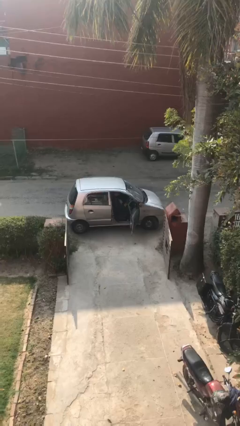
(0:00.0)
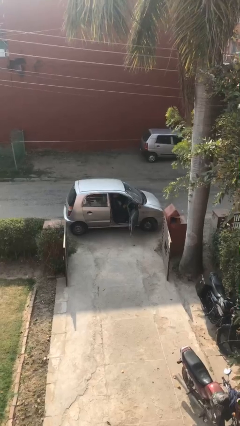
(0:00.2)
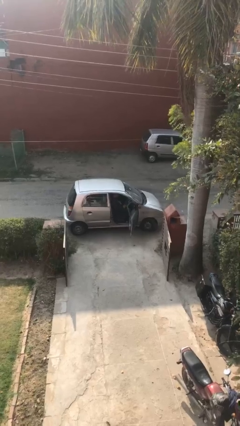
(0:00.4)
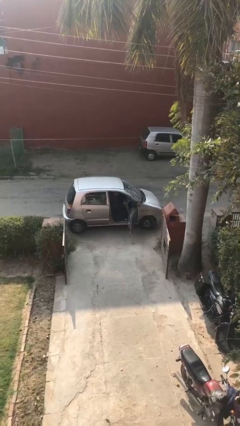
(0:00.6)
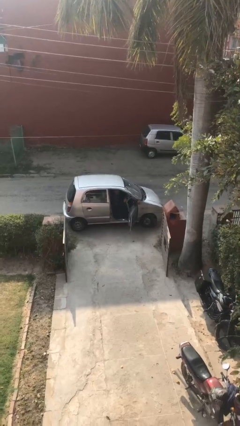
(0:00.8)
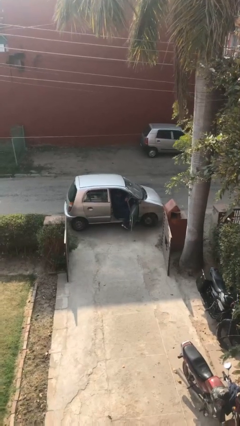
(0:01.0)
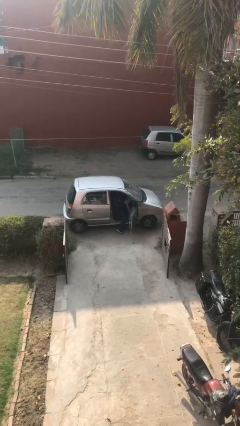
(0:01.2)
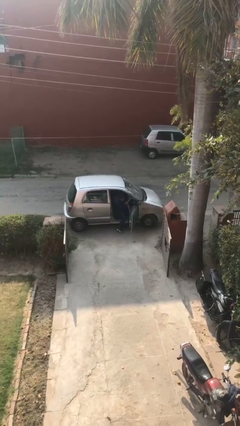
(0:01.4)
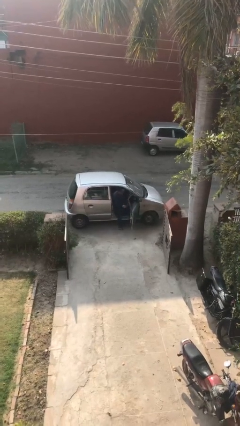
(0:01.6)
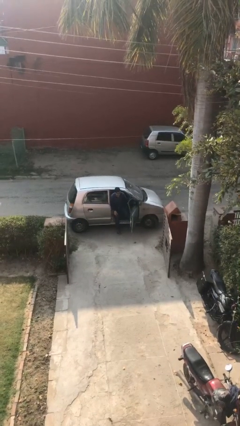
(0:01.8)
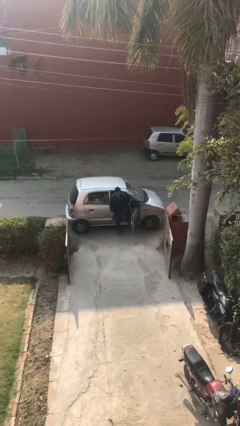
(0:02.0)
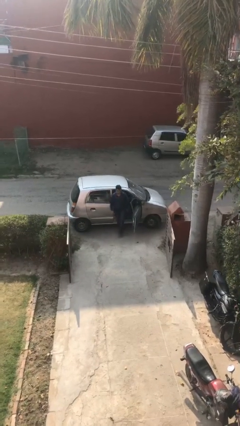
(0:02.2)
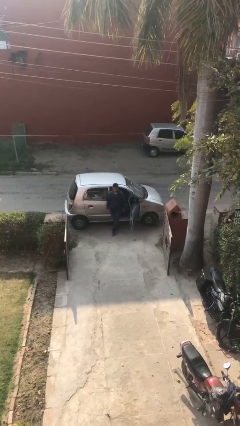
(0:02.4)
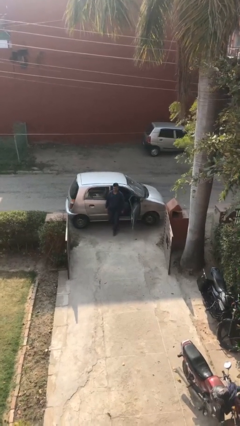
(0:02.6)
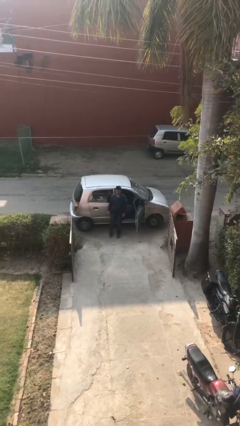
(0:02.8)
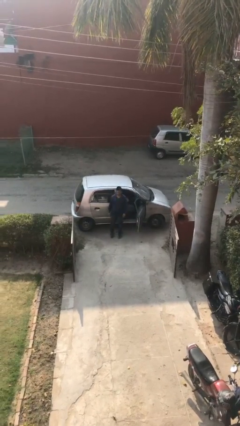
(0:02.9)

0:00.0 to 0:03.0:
person exits car

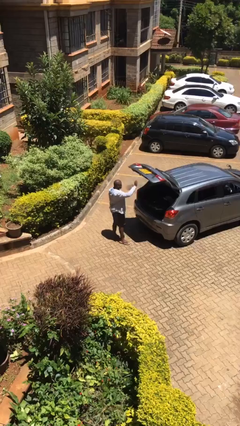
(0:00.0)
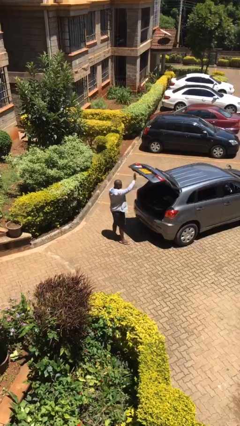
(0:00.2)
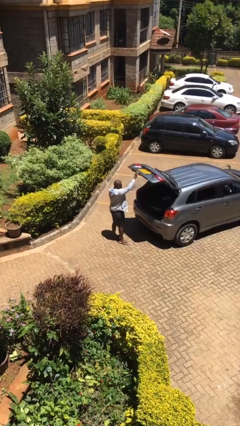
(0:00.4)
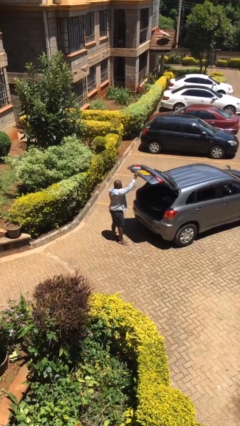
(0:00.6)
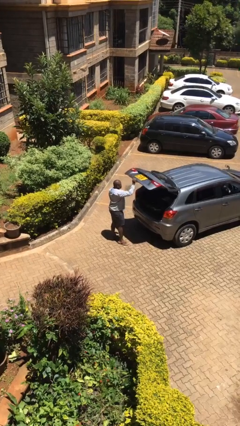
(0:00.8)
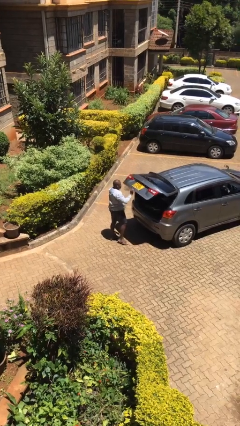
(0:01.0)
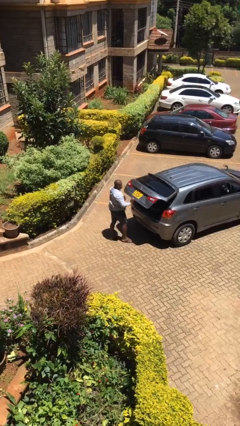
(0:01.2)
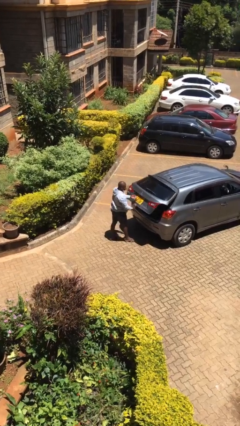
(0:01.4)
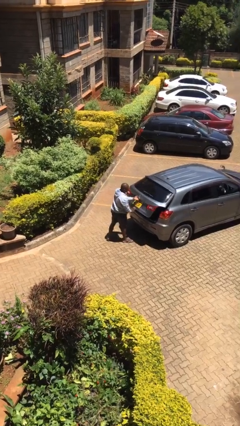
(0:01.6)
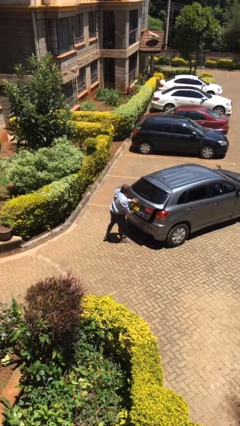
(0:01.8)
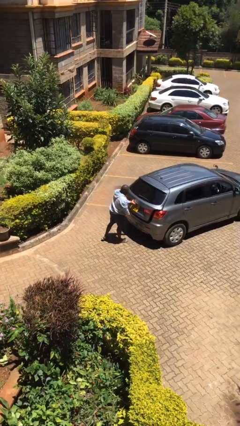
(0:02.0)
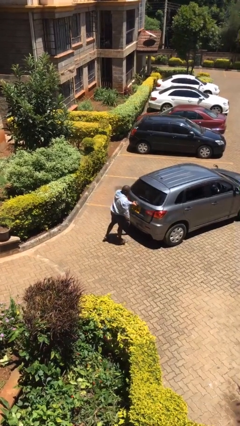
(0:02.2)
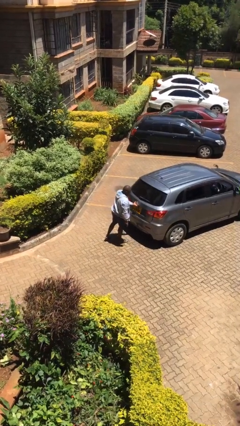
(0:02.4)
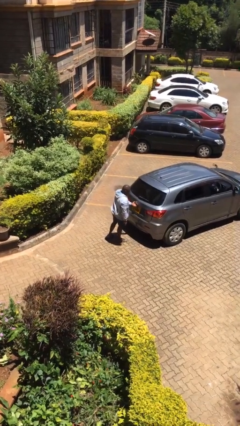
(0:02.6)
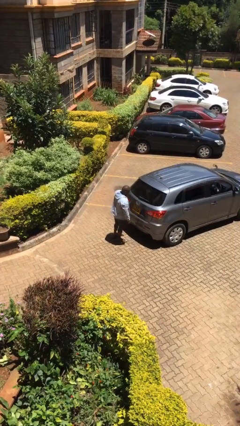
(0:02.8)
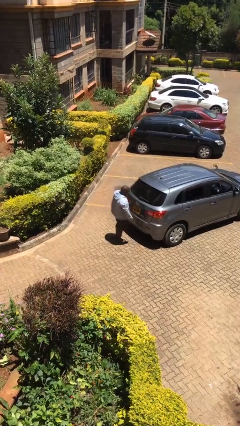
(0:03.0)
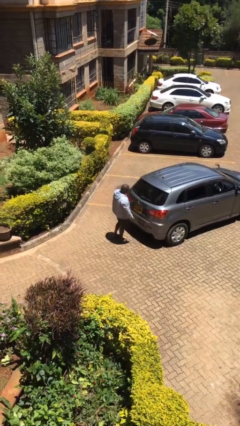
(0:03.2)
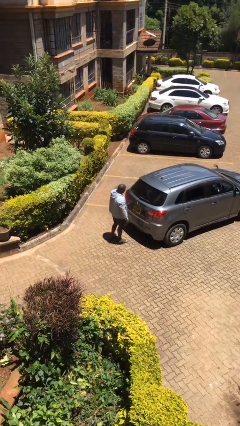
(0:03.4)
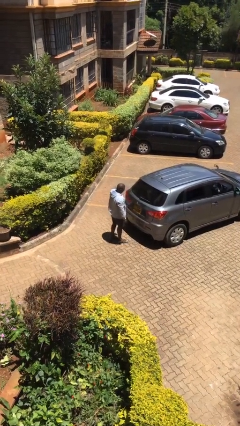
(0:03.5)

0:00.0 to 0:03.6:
person closes car trunk

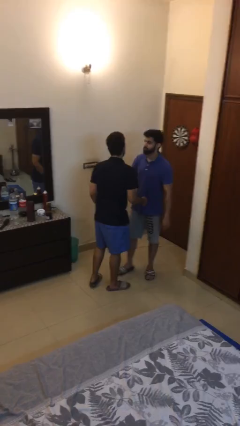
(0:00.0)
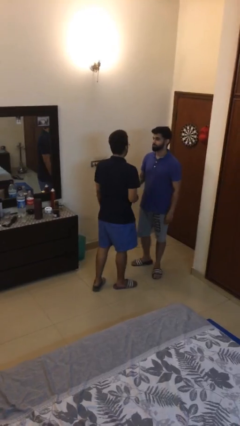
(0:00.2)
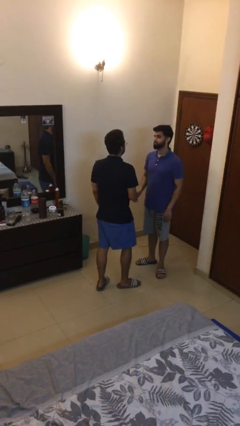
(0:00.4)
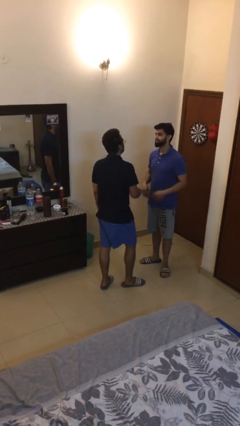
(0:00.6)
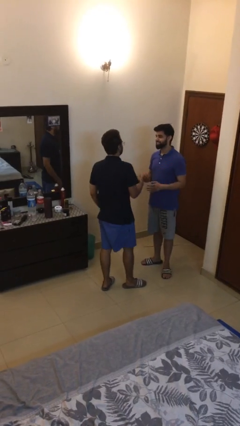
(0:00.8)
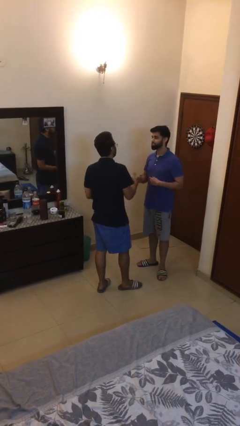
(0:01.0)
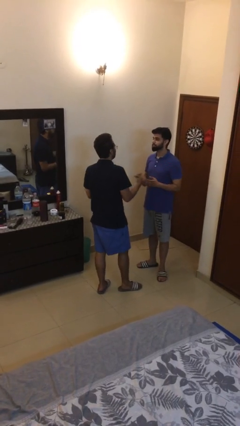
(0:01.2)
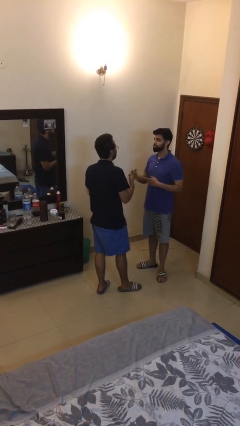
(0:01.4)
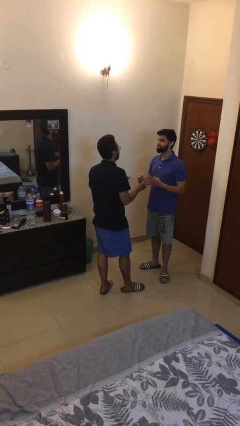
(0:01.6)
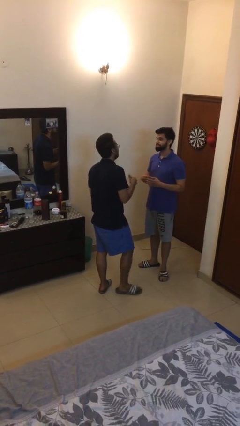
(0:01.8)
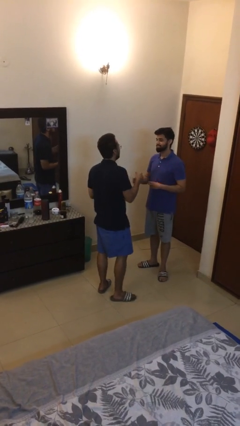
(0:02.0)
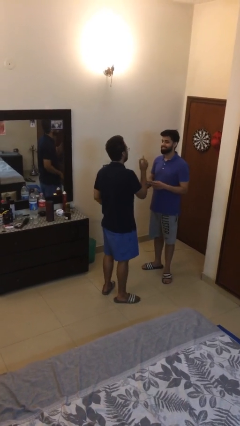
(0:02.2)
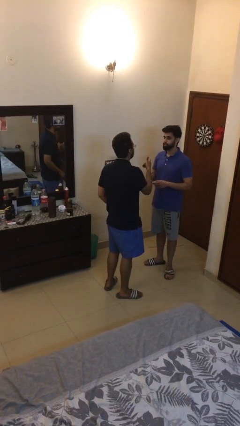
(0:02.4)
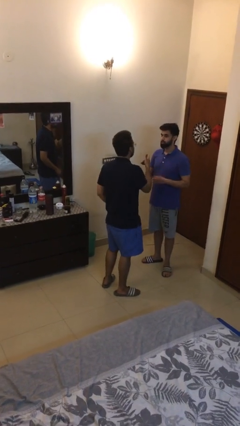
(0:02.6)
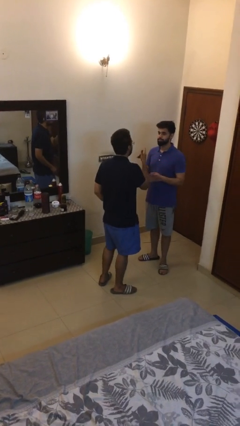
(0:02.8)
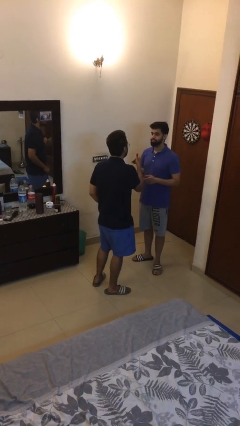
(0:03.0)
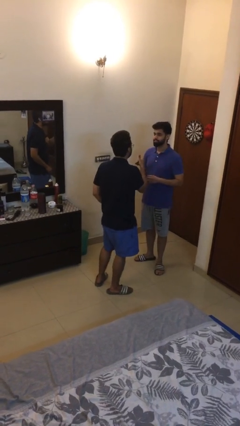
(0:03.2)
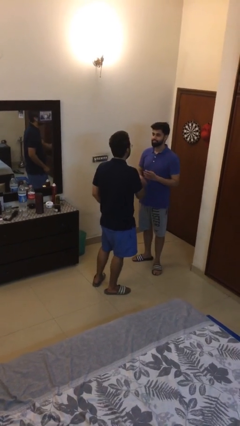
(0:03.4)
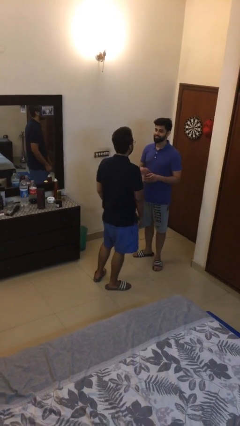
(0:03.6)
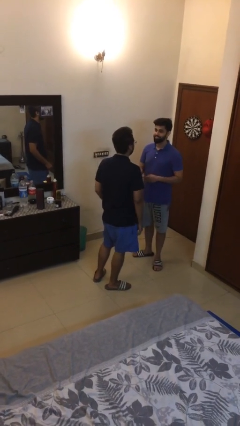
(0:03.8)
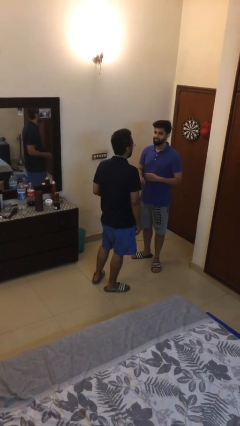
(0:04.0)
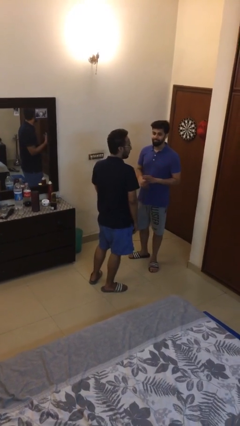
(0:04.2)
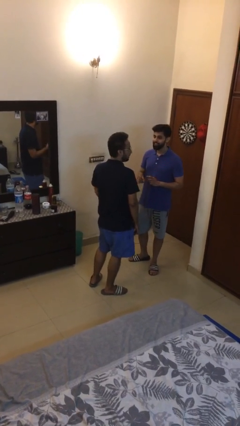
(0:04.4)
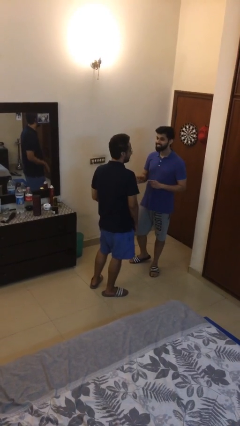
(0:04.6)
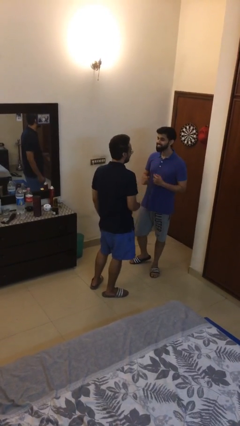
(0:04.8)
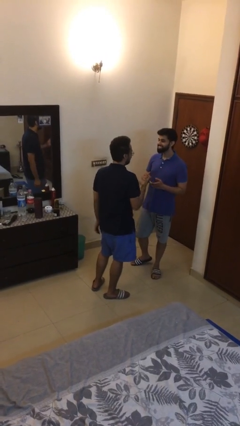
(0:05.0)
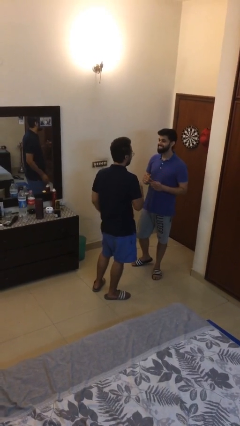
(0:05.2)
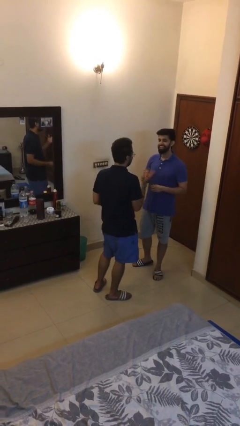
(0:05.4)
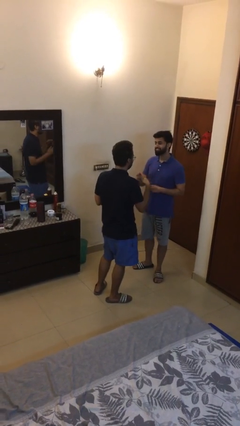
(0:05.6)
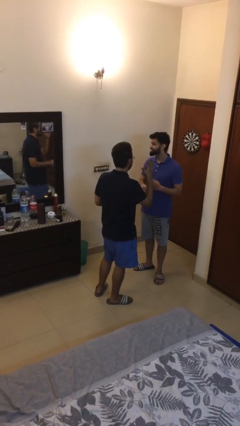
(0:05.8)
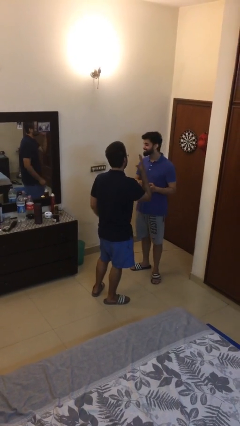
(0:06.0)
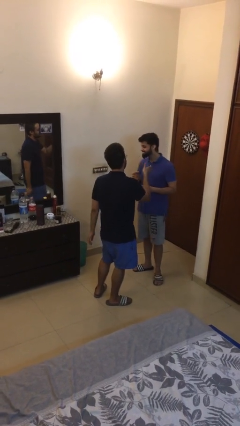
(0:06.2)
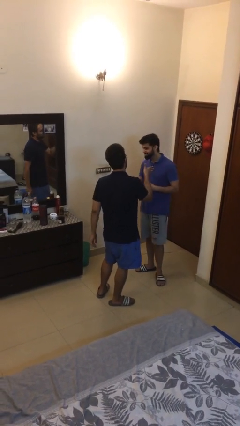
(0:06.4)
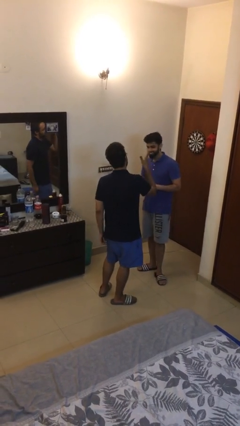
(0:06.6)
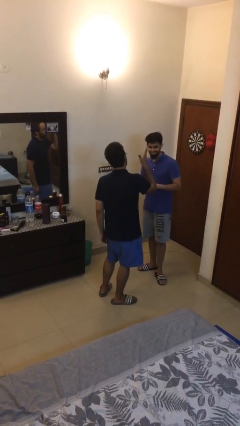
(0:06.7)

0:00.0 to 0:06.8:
person talks to person

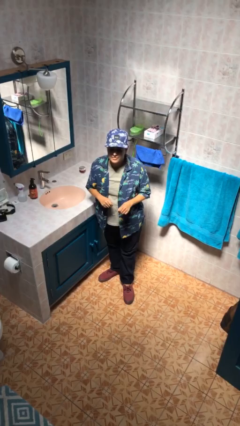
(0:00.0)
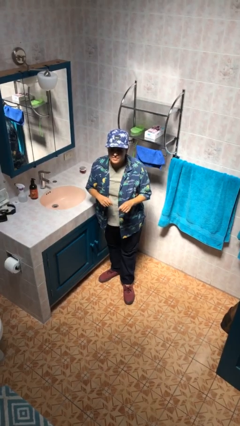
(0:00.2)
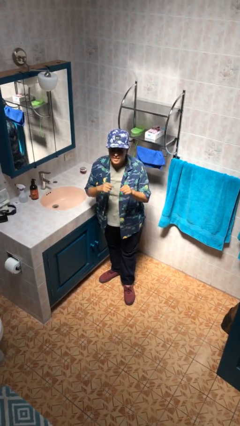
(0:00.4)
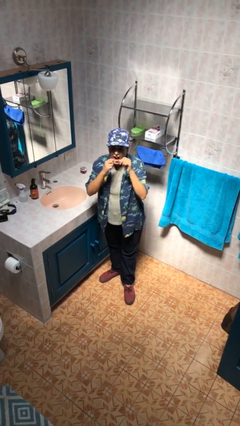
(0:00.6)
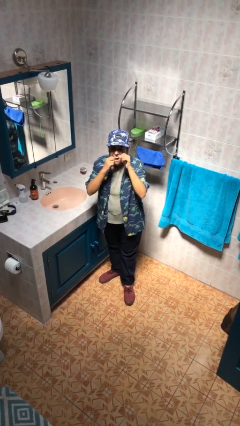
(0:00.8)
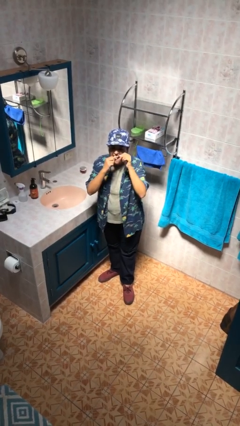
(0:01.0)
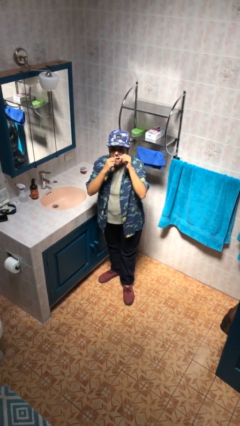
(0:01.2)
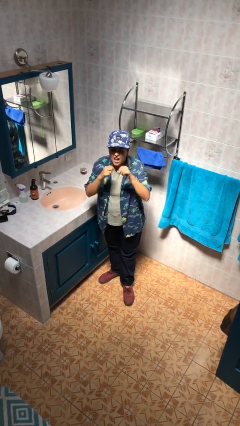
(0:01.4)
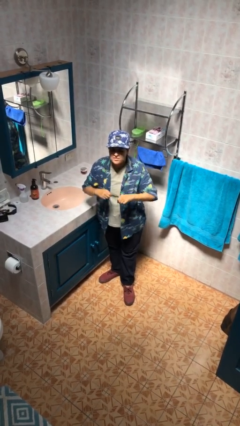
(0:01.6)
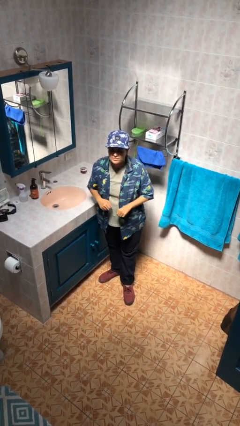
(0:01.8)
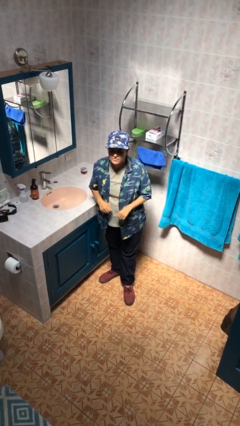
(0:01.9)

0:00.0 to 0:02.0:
person flosses

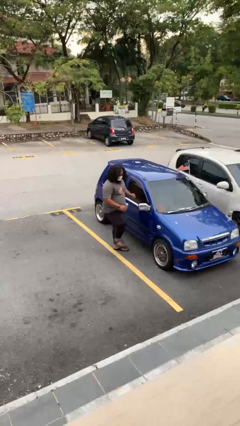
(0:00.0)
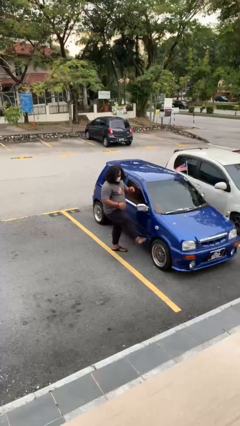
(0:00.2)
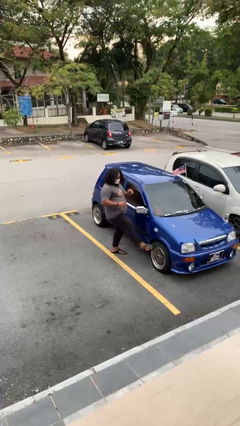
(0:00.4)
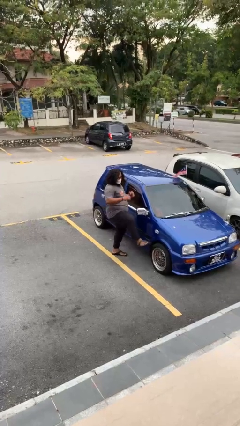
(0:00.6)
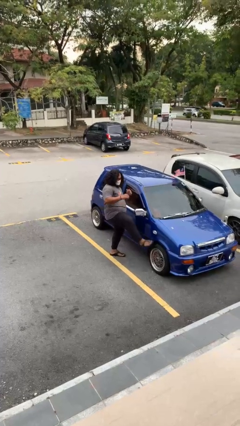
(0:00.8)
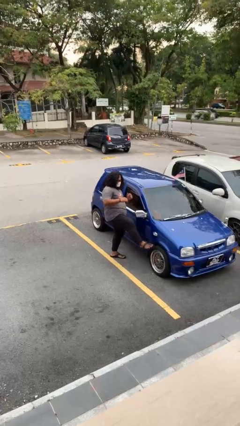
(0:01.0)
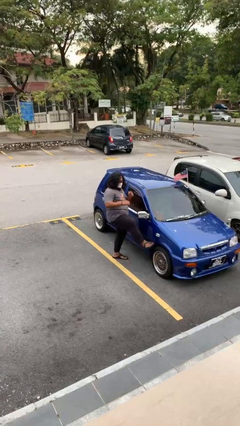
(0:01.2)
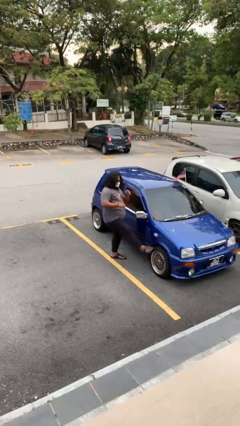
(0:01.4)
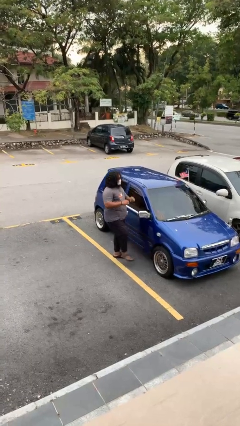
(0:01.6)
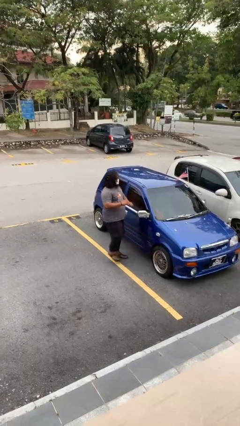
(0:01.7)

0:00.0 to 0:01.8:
person kicks car tires

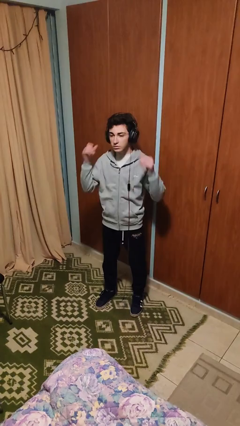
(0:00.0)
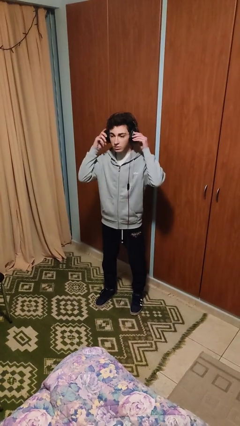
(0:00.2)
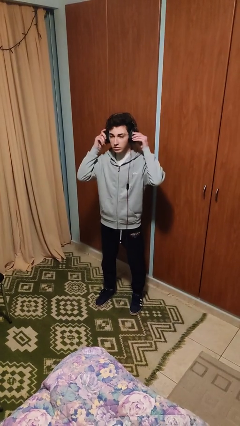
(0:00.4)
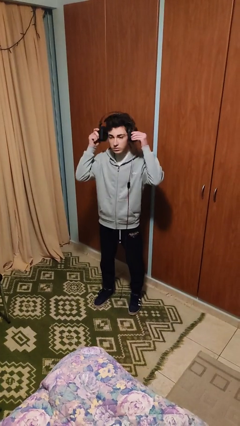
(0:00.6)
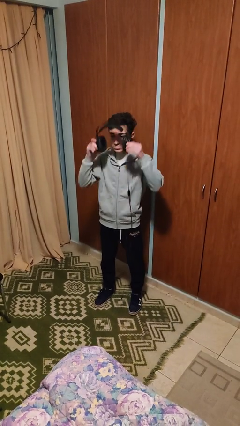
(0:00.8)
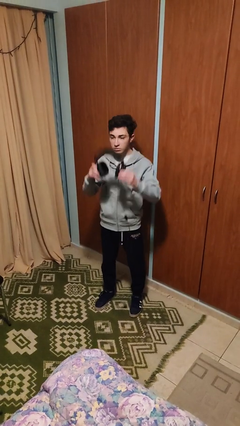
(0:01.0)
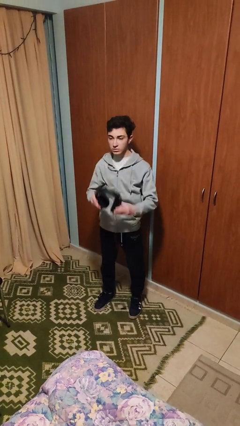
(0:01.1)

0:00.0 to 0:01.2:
person takes off headphones
